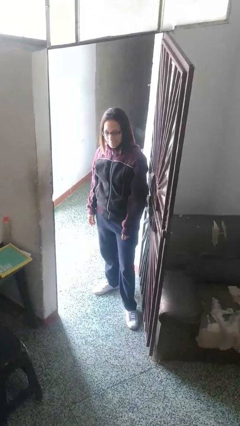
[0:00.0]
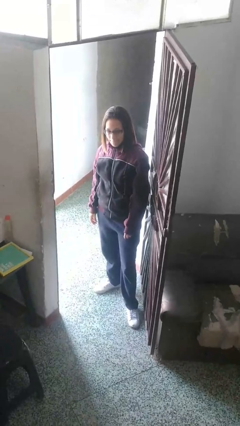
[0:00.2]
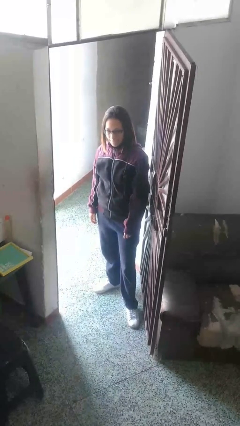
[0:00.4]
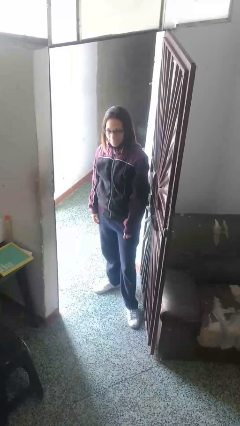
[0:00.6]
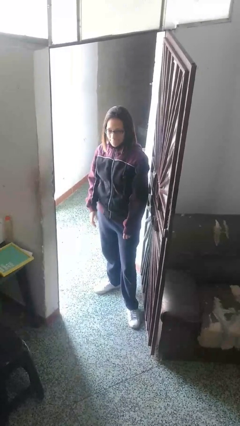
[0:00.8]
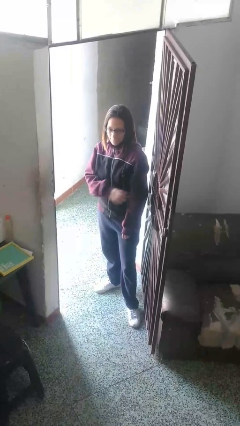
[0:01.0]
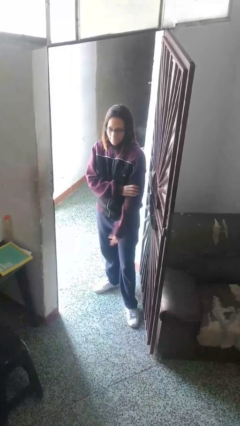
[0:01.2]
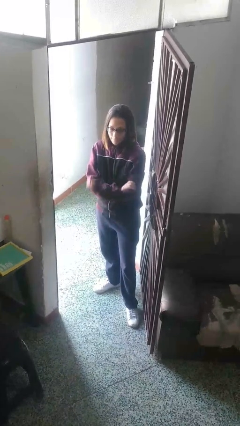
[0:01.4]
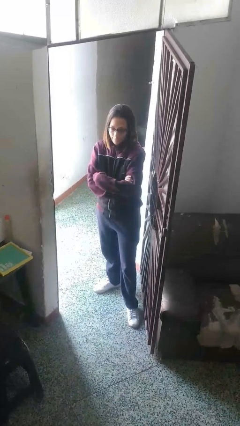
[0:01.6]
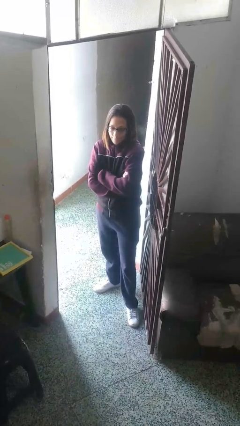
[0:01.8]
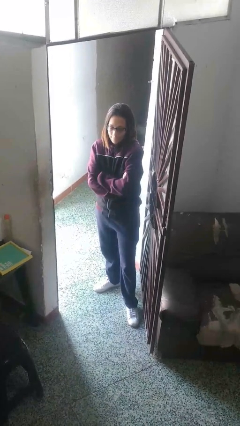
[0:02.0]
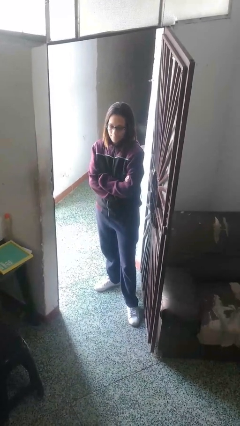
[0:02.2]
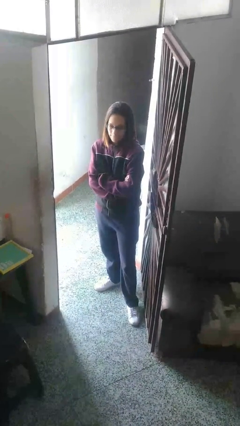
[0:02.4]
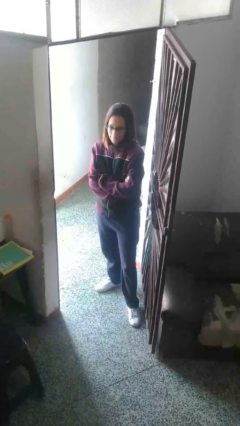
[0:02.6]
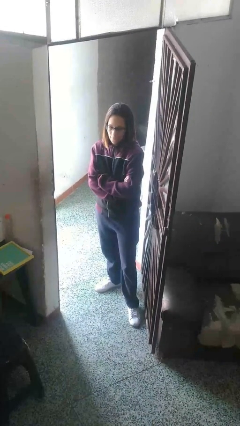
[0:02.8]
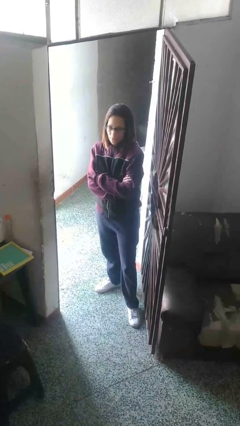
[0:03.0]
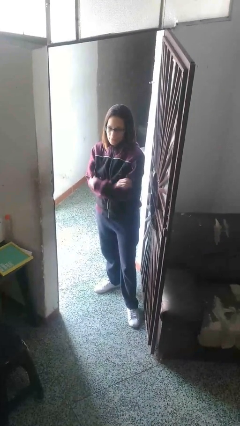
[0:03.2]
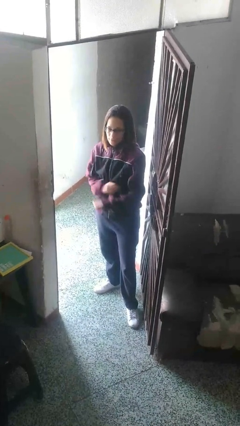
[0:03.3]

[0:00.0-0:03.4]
person gestures arms x

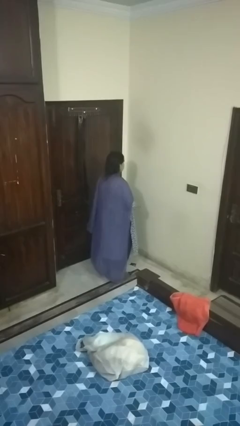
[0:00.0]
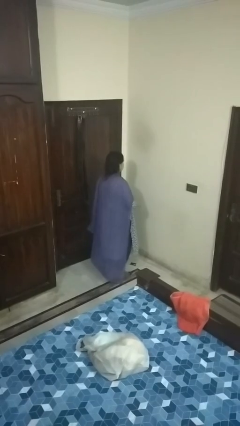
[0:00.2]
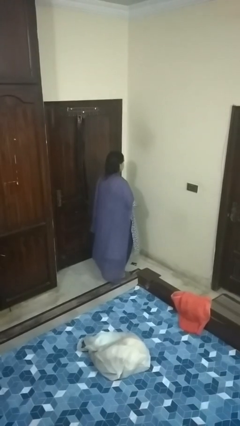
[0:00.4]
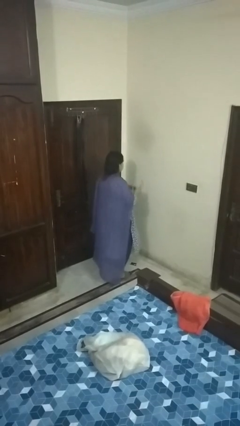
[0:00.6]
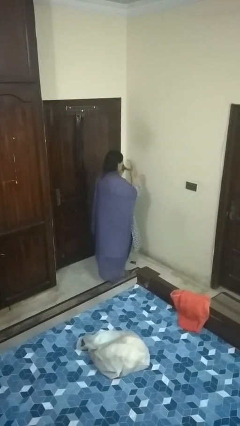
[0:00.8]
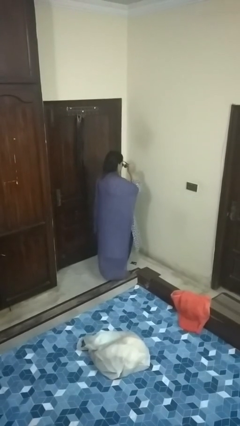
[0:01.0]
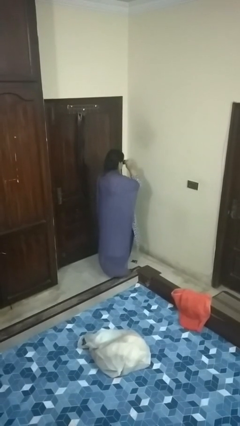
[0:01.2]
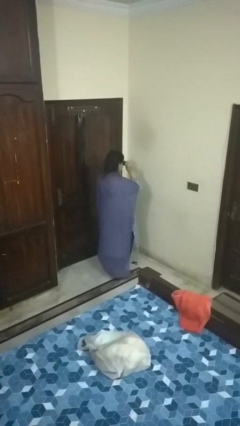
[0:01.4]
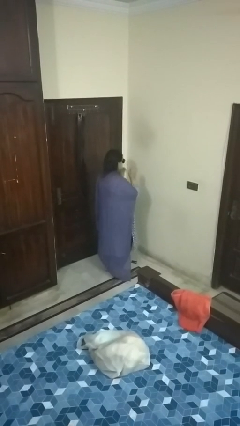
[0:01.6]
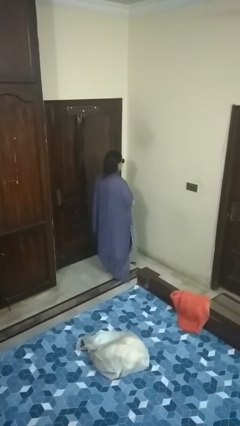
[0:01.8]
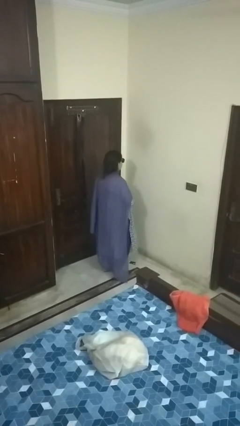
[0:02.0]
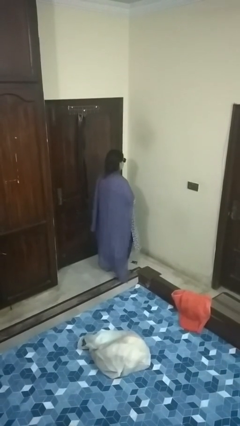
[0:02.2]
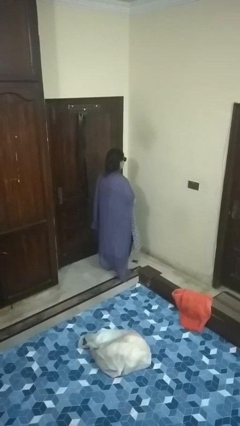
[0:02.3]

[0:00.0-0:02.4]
person puts on sunglasses

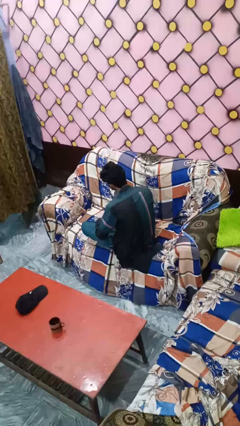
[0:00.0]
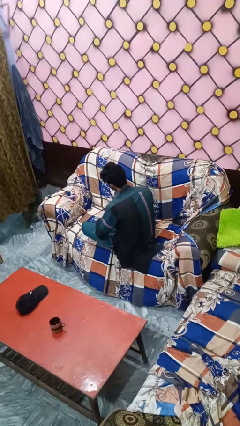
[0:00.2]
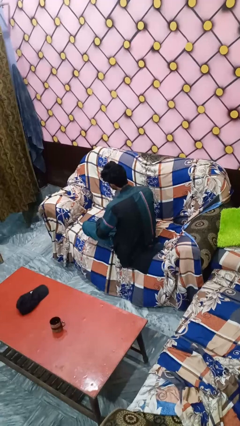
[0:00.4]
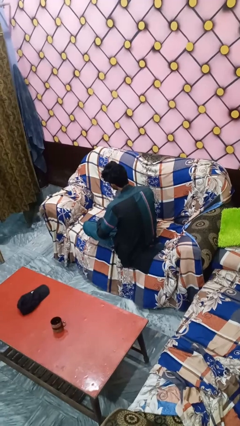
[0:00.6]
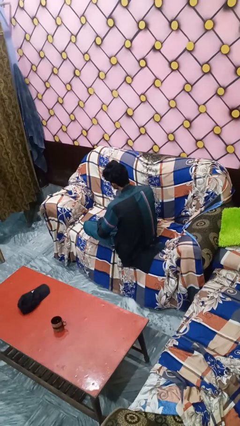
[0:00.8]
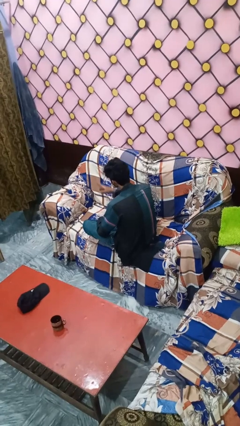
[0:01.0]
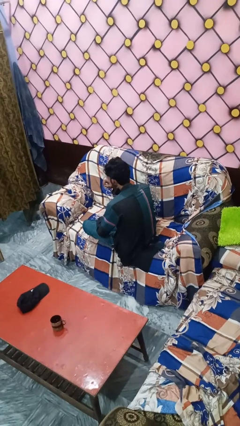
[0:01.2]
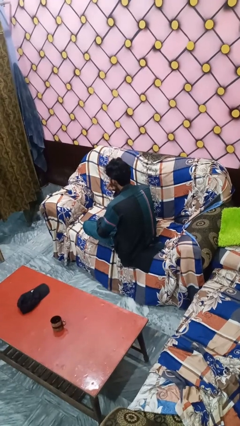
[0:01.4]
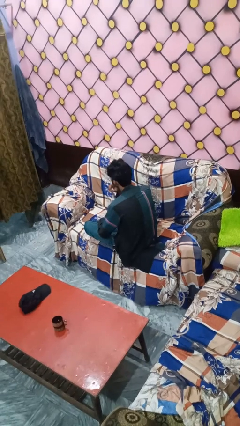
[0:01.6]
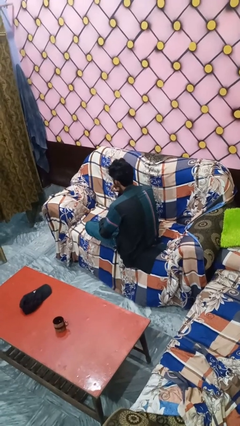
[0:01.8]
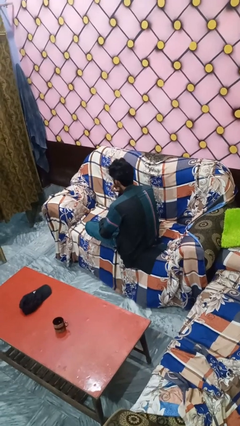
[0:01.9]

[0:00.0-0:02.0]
person gestures be quiet

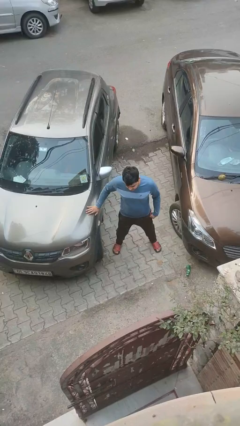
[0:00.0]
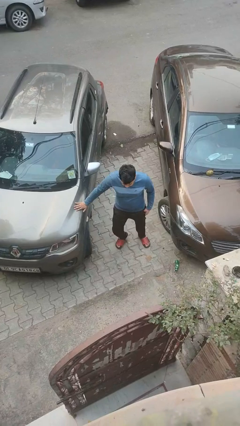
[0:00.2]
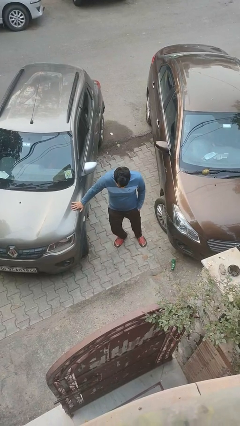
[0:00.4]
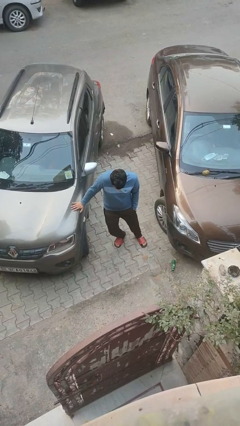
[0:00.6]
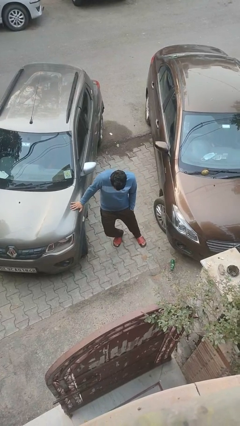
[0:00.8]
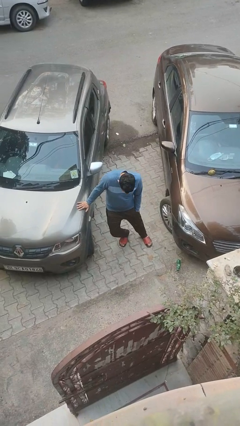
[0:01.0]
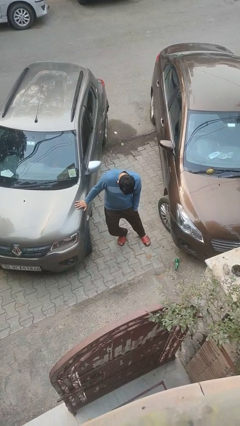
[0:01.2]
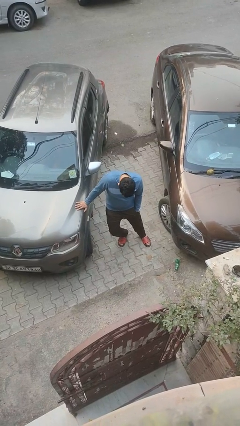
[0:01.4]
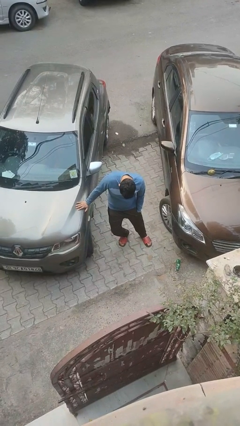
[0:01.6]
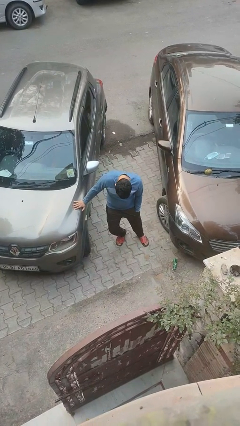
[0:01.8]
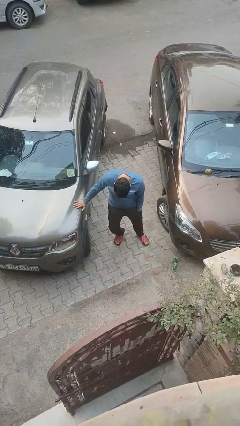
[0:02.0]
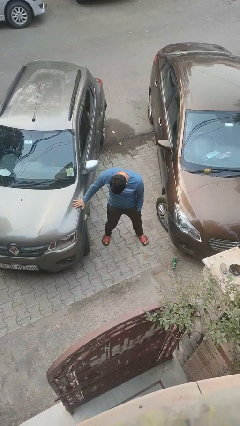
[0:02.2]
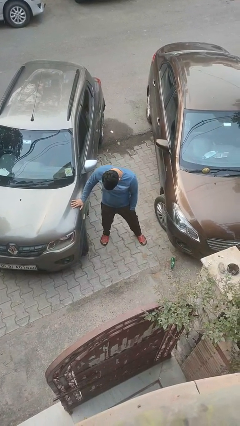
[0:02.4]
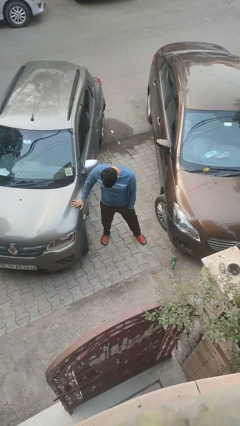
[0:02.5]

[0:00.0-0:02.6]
person leans against car

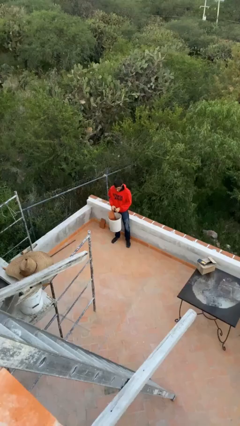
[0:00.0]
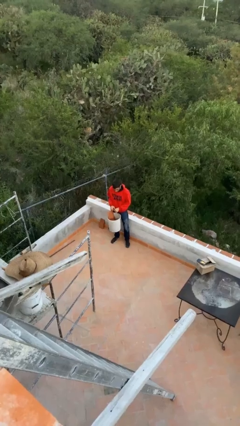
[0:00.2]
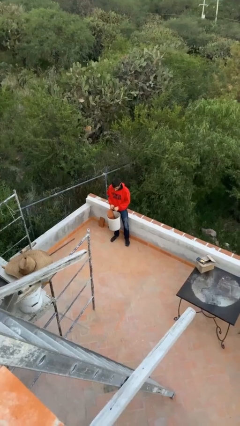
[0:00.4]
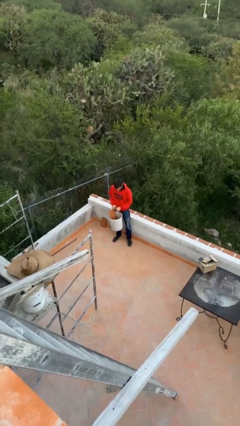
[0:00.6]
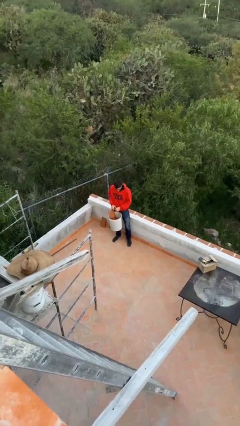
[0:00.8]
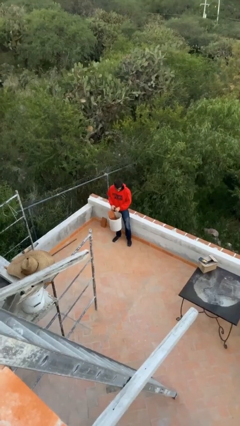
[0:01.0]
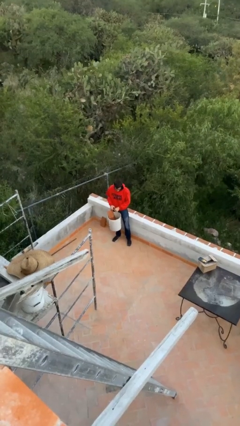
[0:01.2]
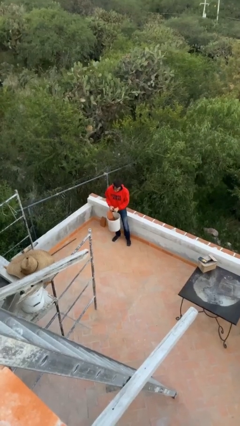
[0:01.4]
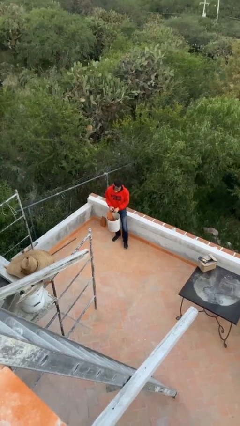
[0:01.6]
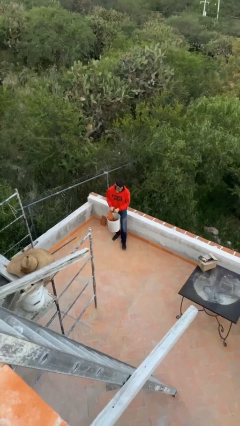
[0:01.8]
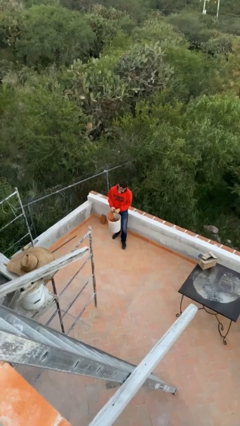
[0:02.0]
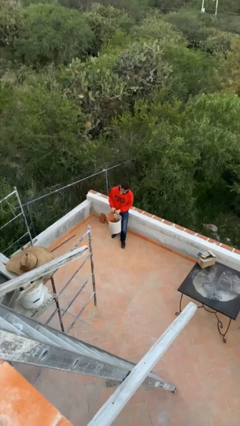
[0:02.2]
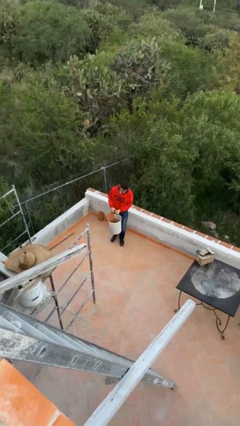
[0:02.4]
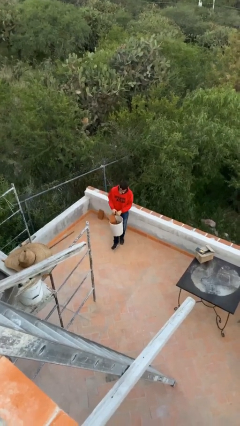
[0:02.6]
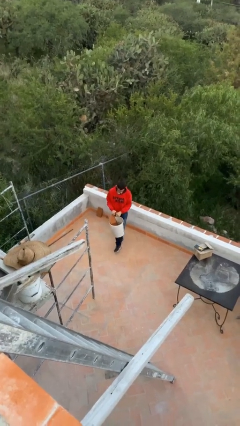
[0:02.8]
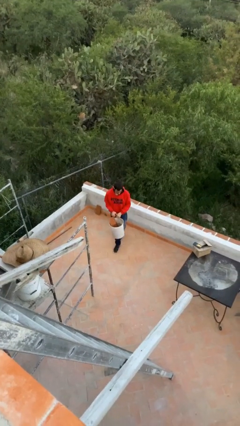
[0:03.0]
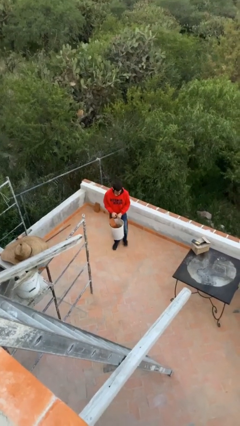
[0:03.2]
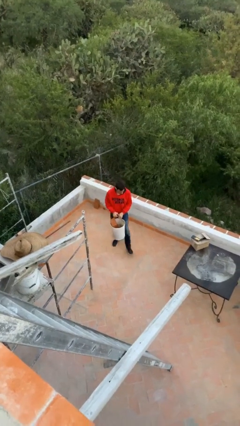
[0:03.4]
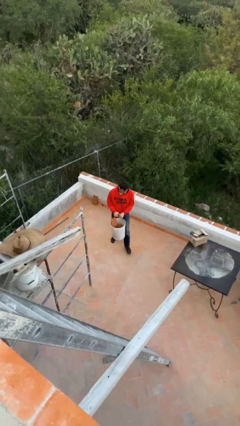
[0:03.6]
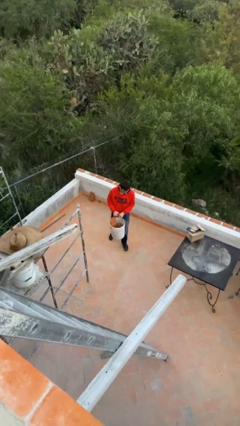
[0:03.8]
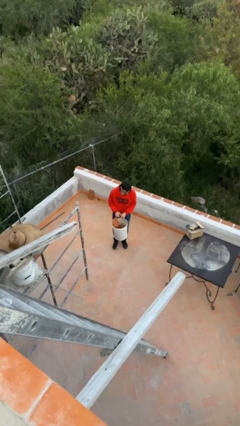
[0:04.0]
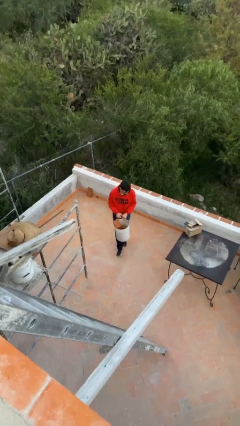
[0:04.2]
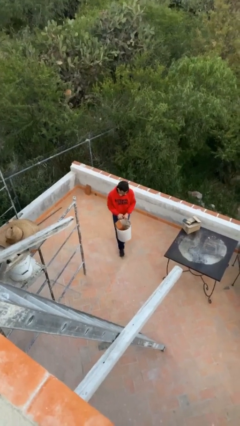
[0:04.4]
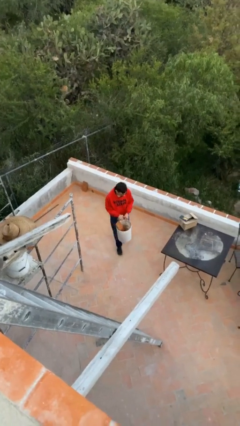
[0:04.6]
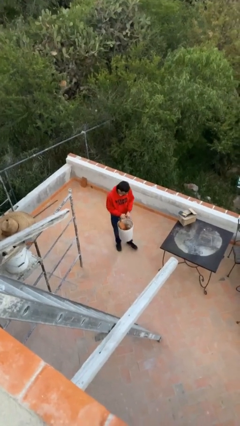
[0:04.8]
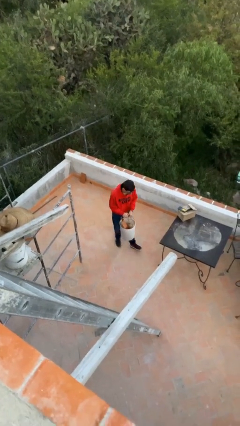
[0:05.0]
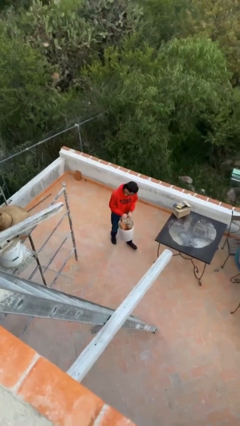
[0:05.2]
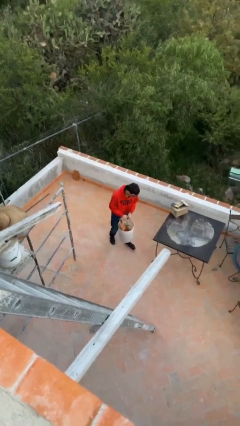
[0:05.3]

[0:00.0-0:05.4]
person carries heavy object

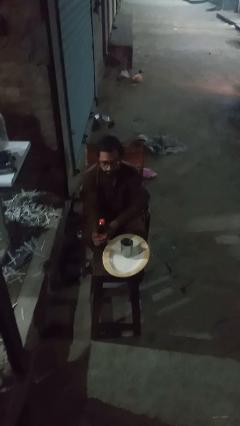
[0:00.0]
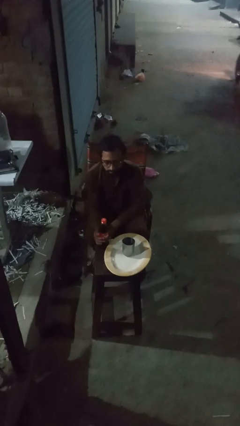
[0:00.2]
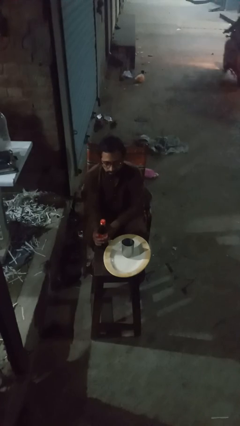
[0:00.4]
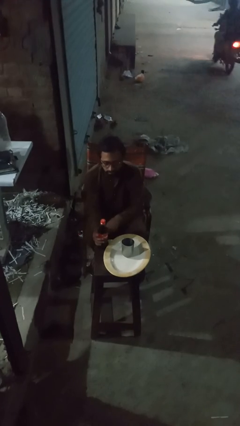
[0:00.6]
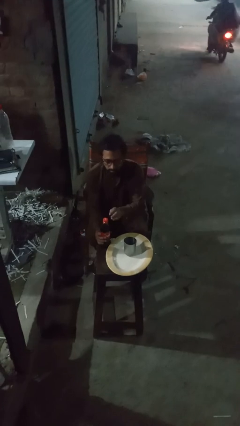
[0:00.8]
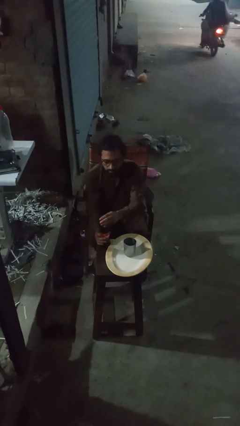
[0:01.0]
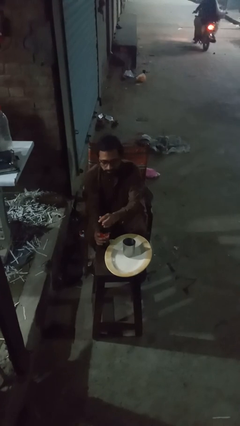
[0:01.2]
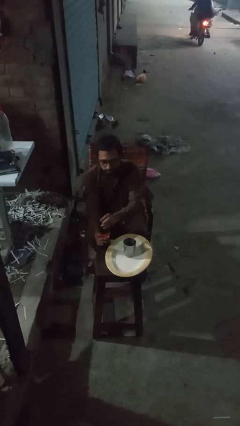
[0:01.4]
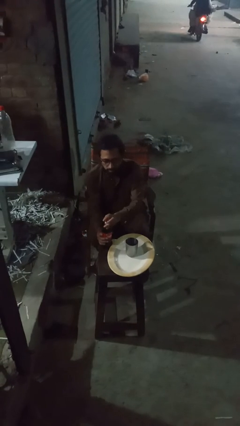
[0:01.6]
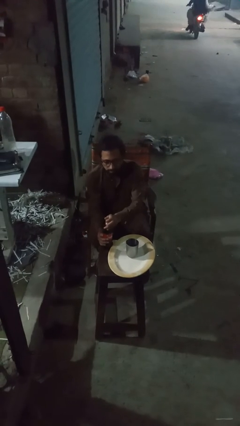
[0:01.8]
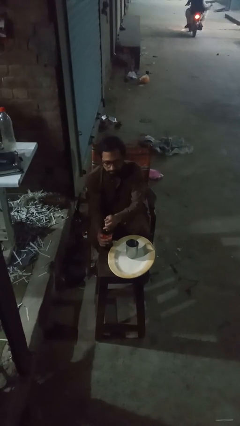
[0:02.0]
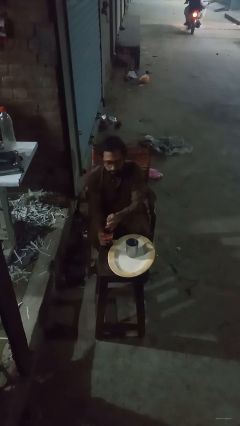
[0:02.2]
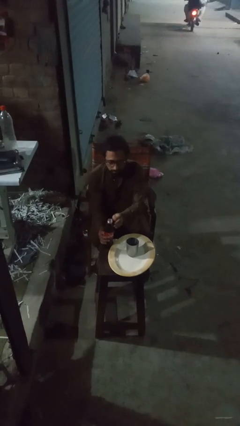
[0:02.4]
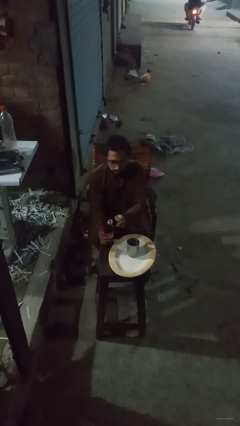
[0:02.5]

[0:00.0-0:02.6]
person unscrews lid from bottle
